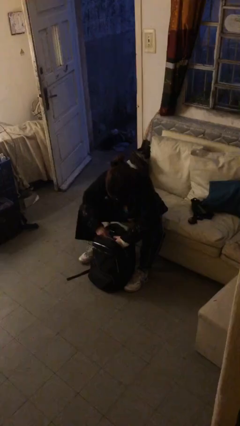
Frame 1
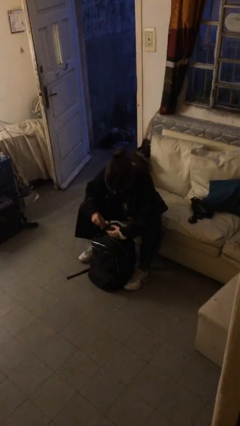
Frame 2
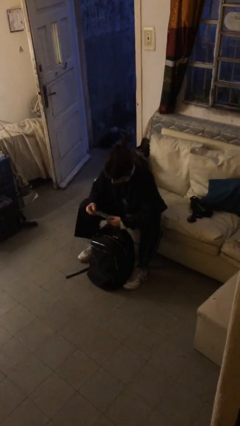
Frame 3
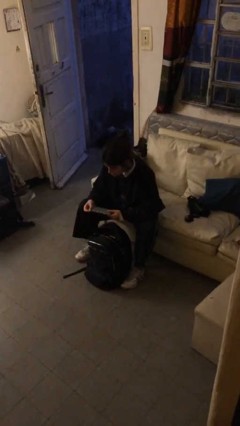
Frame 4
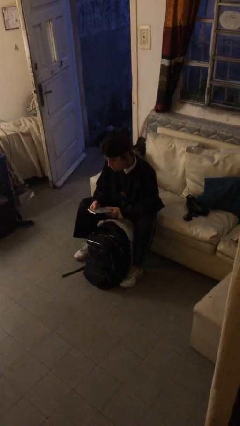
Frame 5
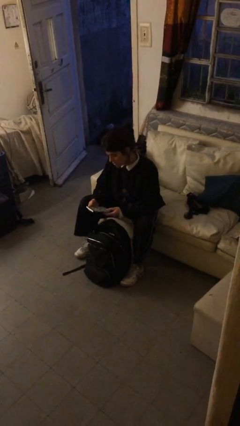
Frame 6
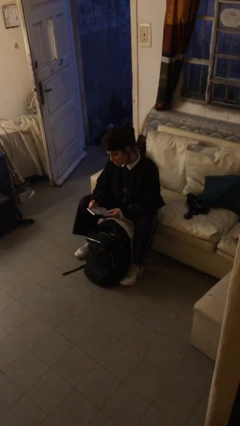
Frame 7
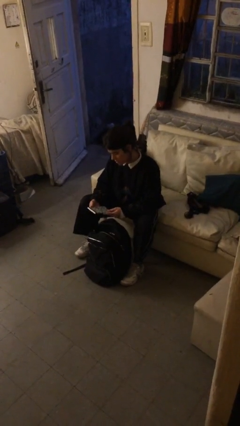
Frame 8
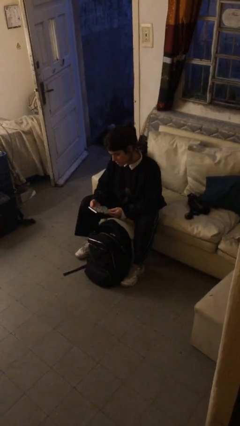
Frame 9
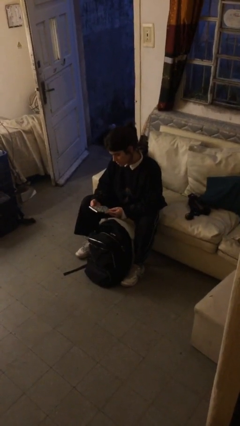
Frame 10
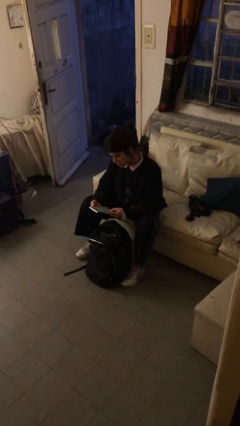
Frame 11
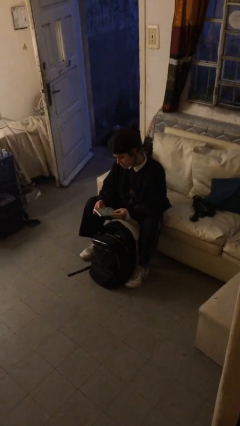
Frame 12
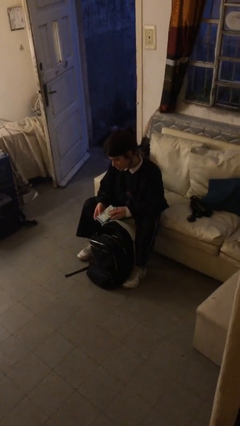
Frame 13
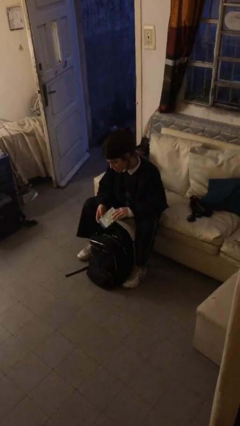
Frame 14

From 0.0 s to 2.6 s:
person takes object from backpack

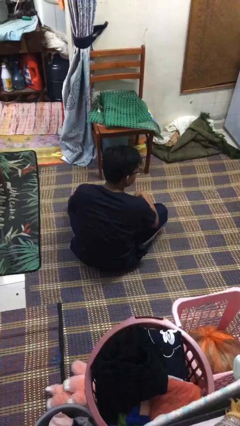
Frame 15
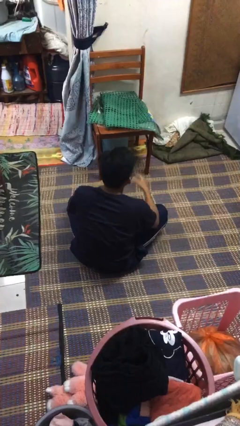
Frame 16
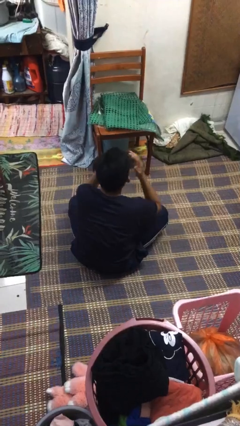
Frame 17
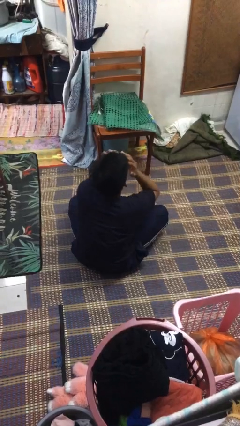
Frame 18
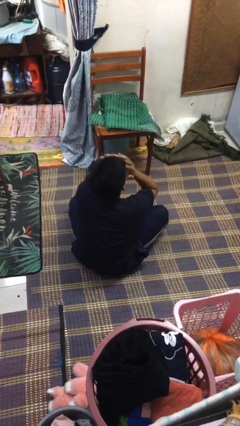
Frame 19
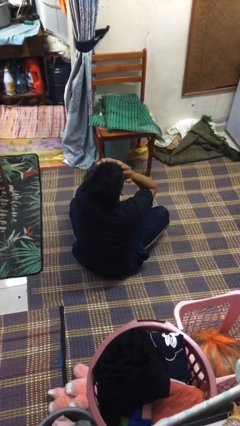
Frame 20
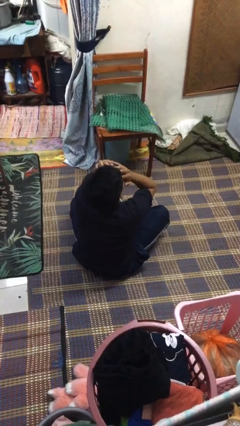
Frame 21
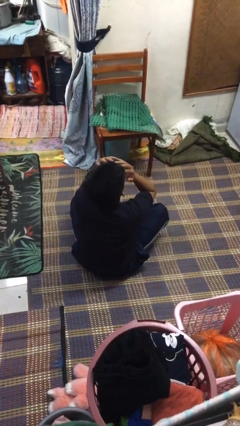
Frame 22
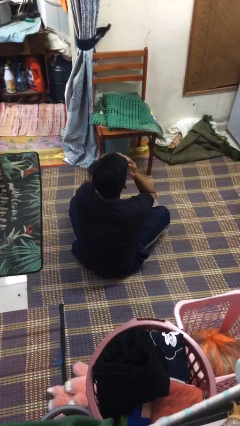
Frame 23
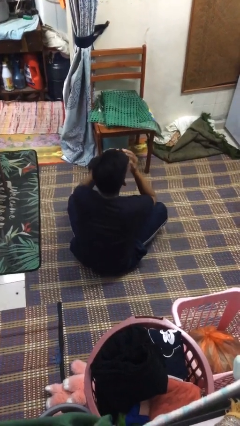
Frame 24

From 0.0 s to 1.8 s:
person covers face with hands

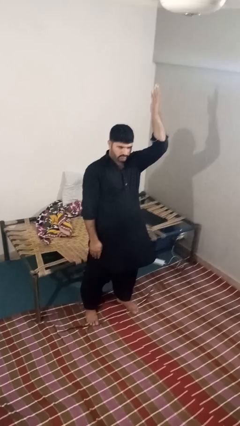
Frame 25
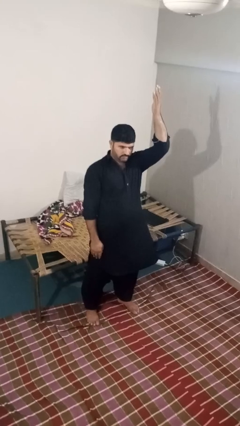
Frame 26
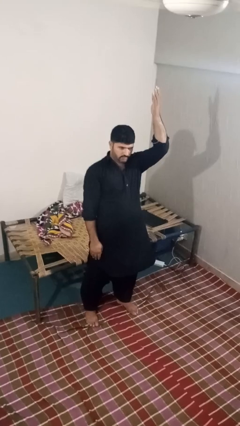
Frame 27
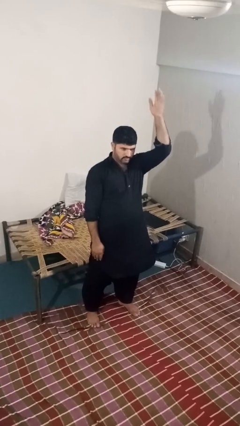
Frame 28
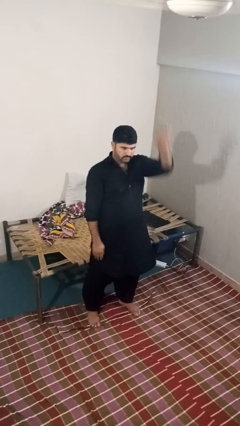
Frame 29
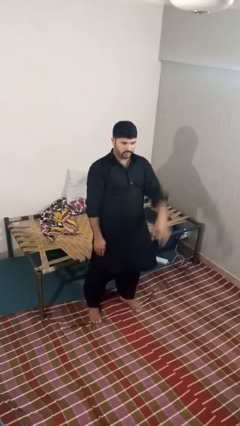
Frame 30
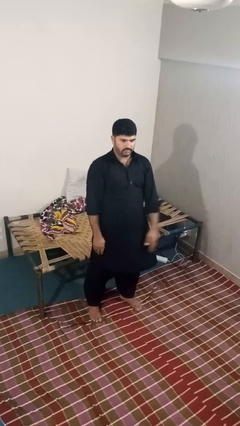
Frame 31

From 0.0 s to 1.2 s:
person gestures swipe down

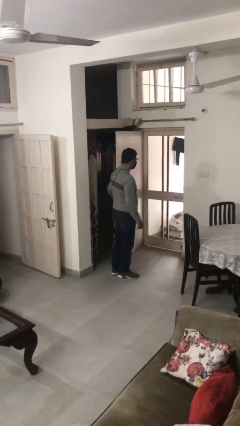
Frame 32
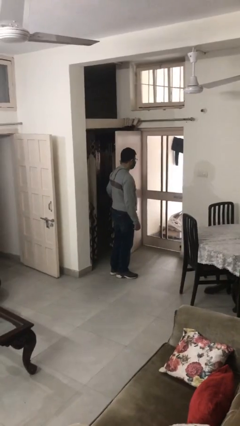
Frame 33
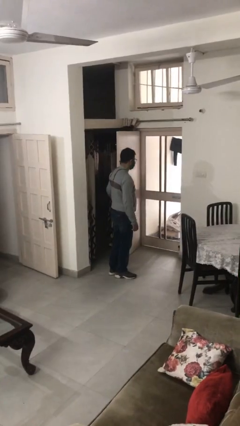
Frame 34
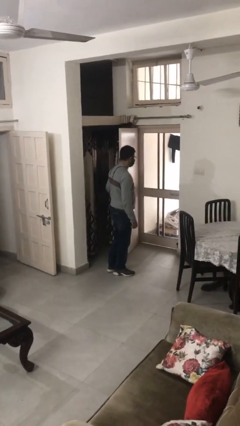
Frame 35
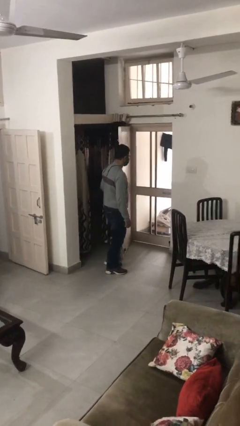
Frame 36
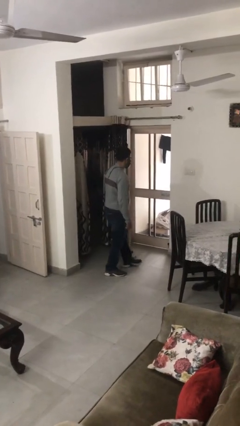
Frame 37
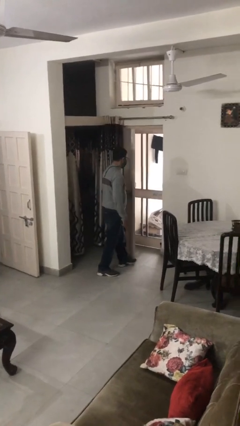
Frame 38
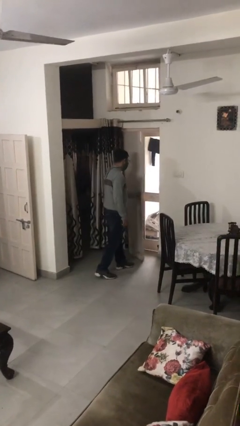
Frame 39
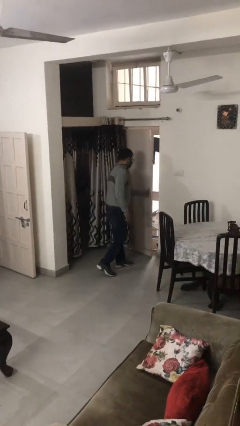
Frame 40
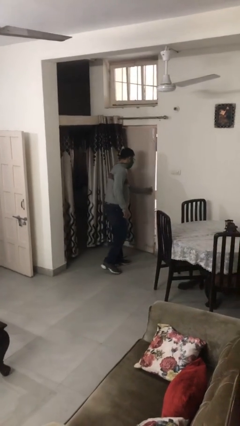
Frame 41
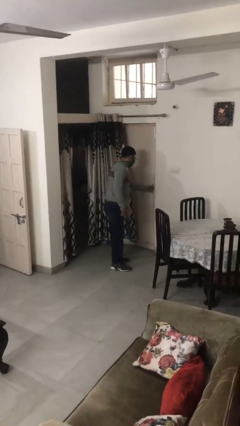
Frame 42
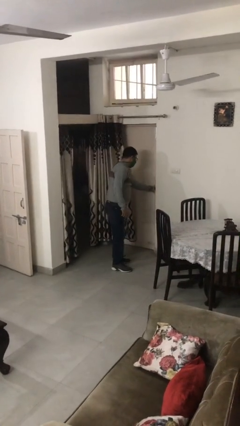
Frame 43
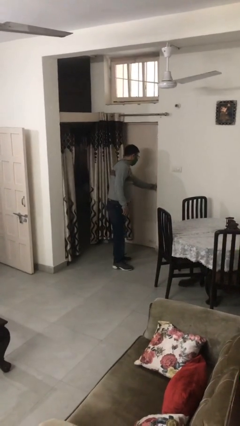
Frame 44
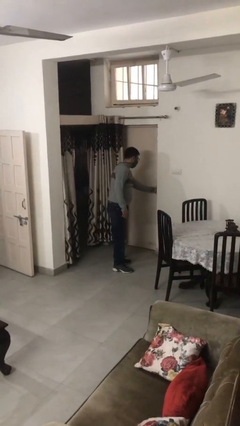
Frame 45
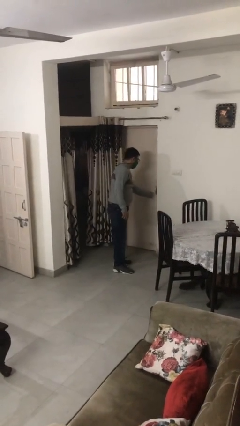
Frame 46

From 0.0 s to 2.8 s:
person closes facility door

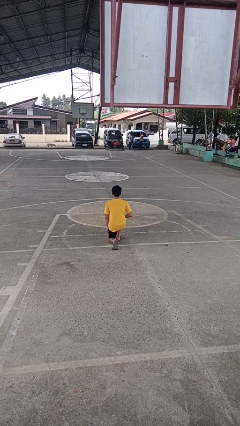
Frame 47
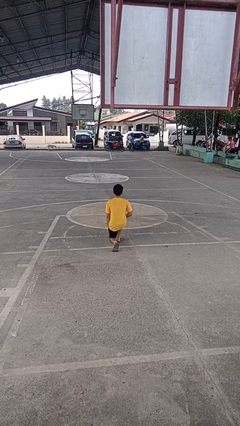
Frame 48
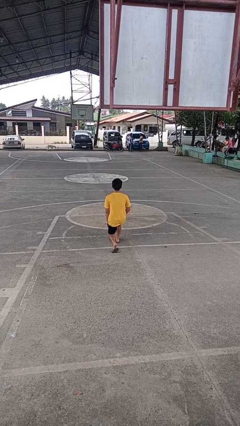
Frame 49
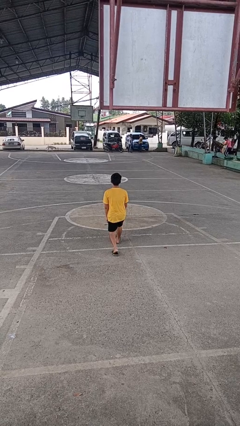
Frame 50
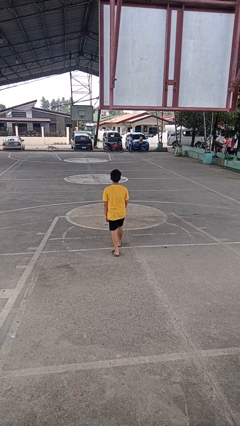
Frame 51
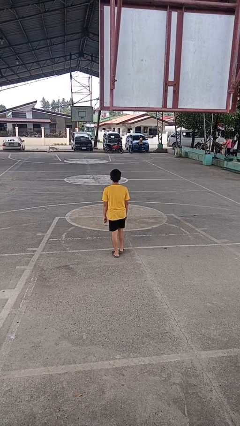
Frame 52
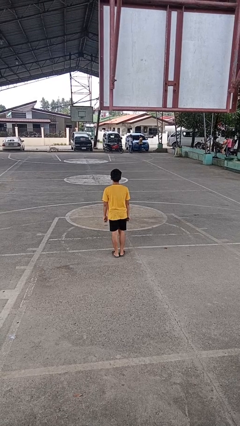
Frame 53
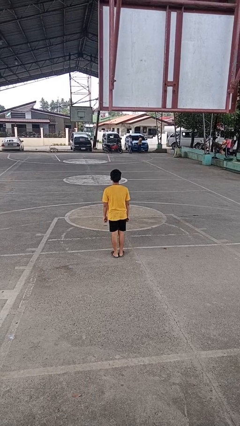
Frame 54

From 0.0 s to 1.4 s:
person stands up from floor

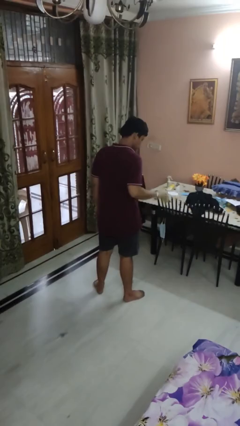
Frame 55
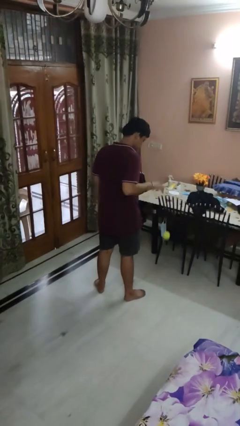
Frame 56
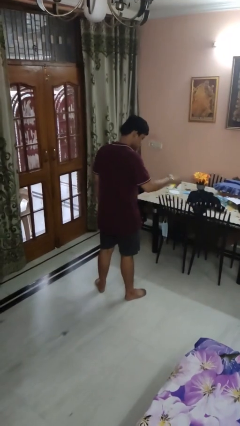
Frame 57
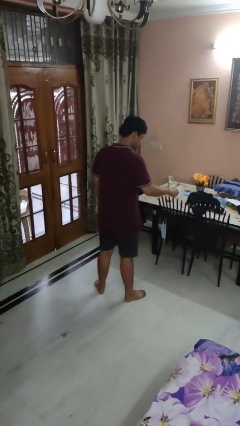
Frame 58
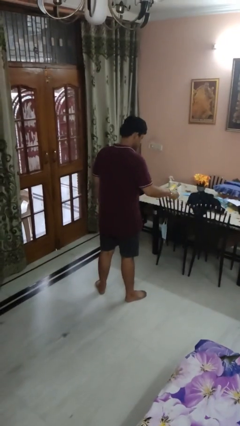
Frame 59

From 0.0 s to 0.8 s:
person bounces ball on floor

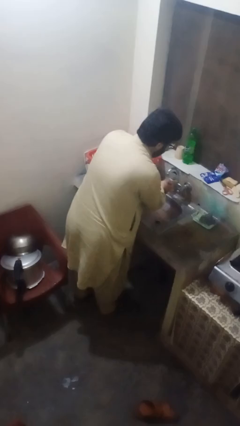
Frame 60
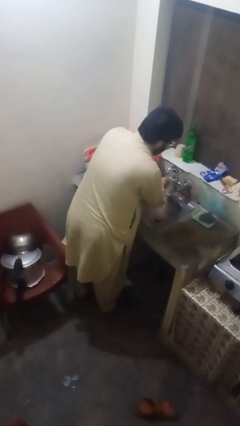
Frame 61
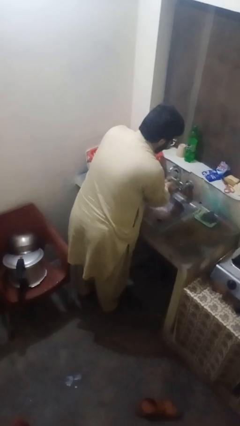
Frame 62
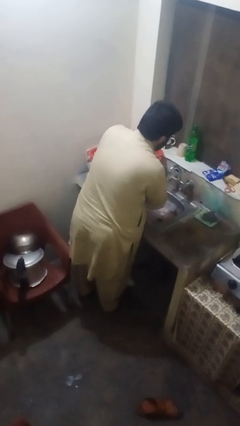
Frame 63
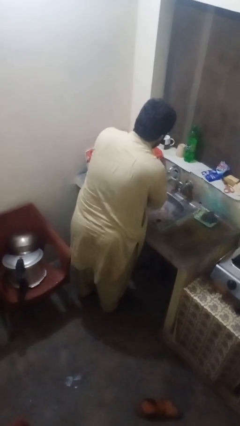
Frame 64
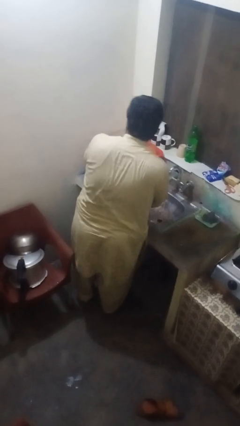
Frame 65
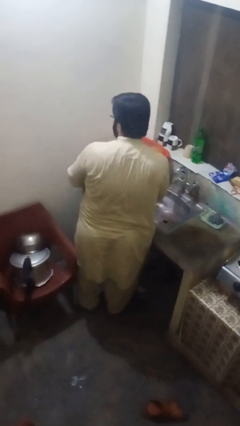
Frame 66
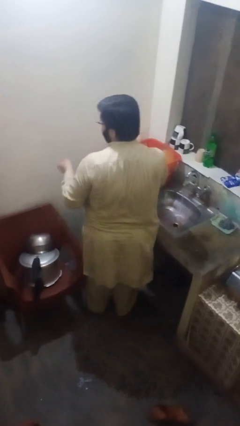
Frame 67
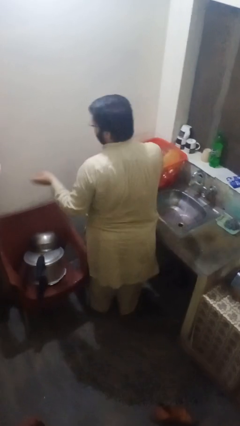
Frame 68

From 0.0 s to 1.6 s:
person washes hands

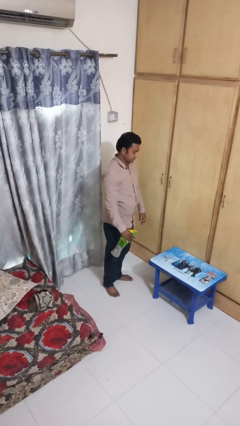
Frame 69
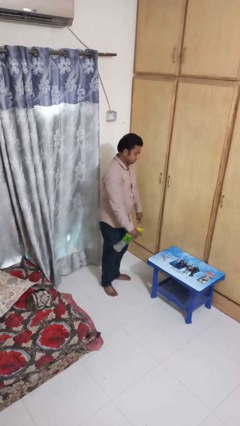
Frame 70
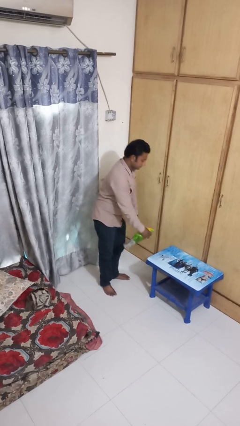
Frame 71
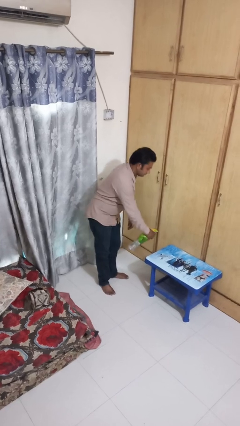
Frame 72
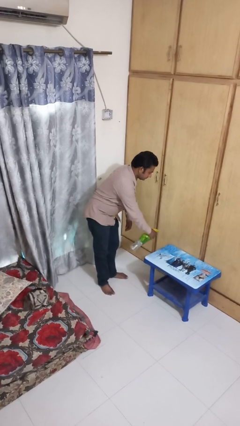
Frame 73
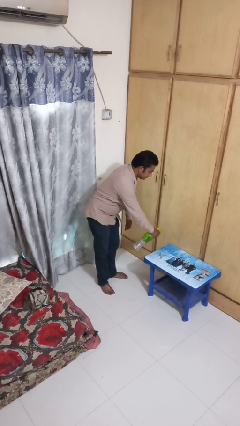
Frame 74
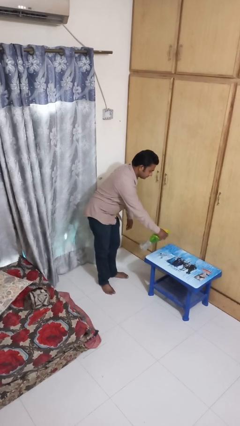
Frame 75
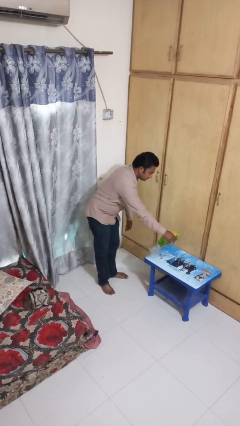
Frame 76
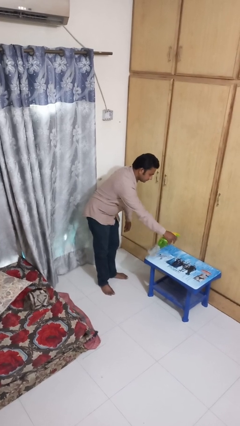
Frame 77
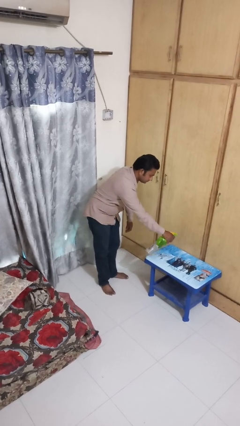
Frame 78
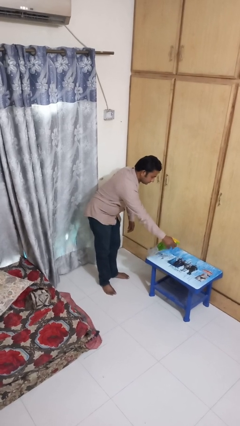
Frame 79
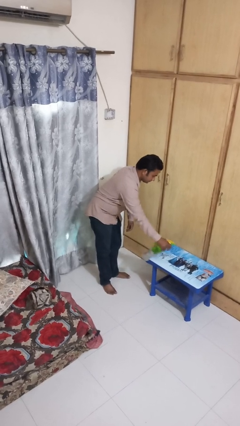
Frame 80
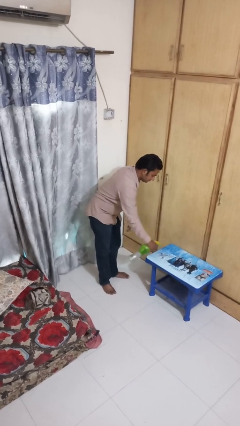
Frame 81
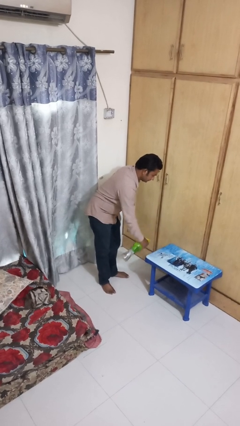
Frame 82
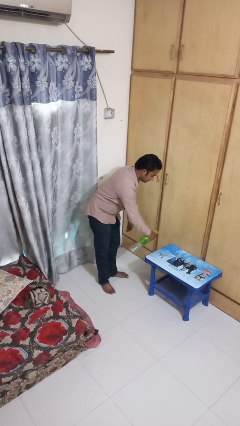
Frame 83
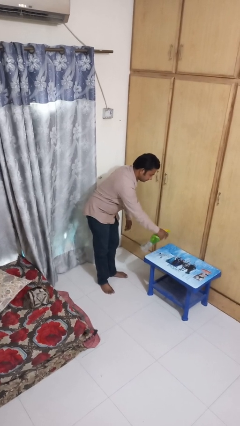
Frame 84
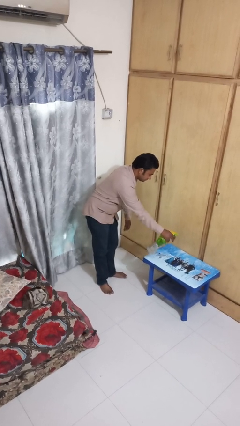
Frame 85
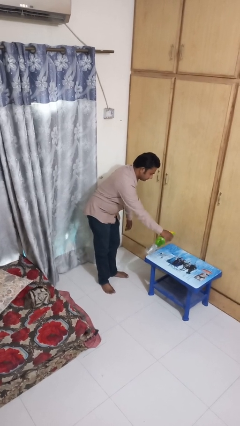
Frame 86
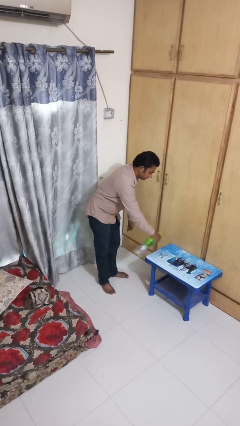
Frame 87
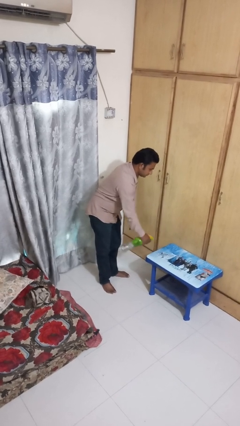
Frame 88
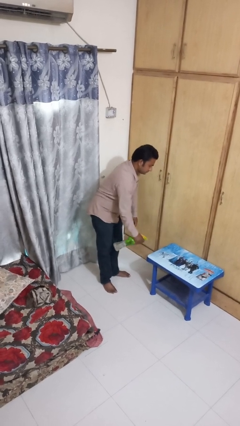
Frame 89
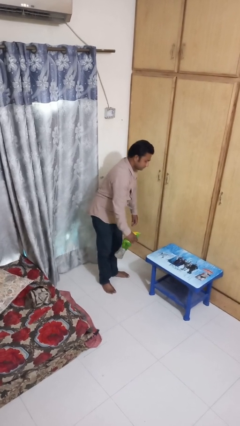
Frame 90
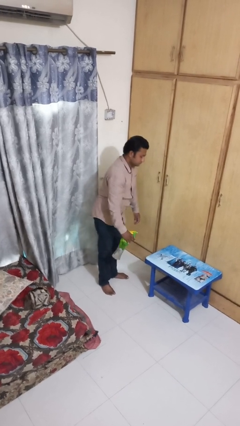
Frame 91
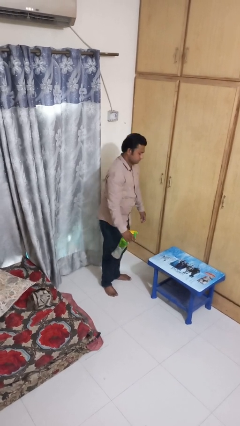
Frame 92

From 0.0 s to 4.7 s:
person sprays from bottle
